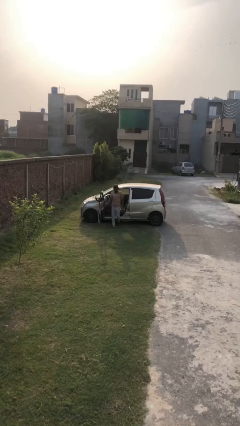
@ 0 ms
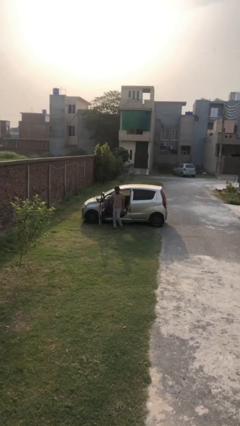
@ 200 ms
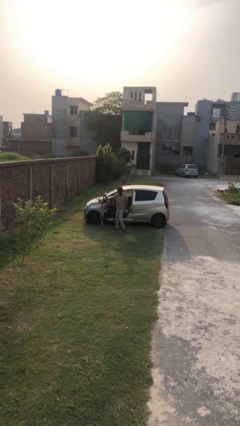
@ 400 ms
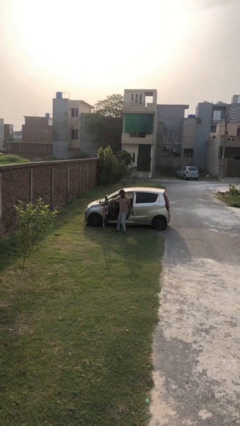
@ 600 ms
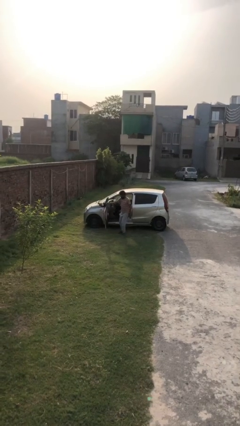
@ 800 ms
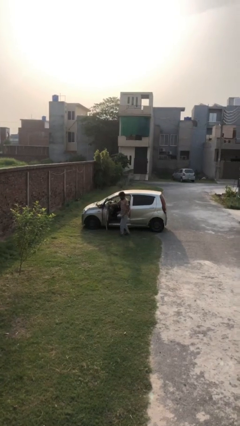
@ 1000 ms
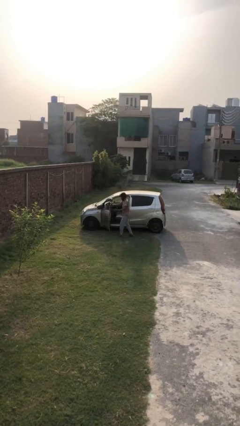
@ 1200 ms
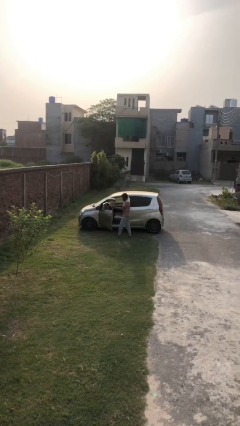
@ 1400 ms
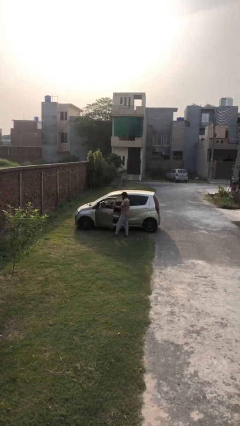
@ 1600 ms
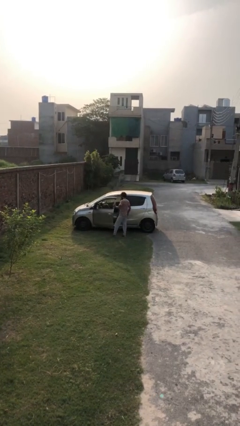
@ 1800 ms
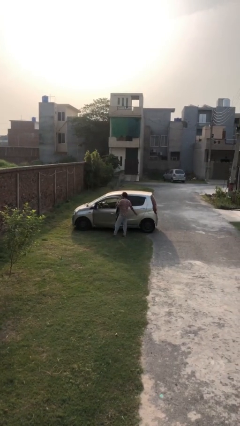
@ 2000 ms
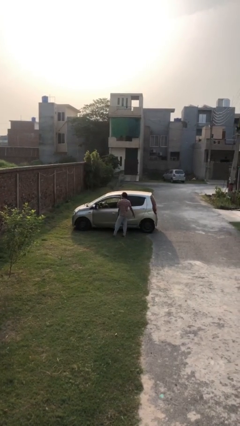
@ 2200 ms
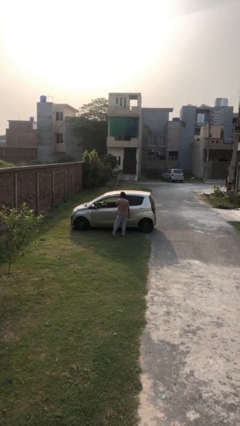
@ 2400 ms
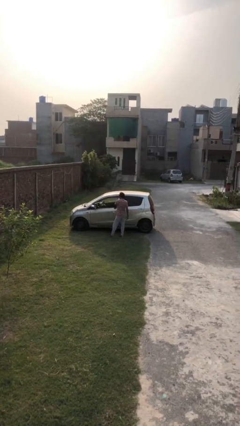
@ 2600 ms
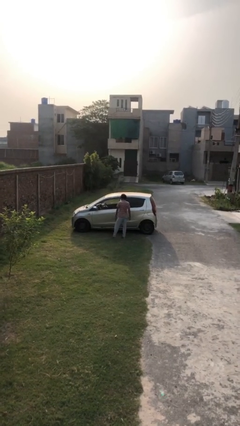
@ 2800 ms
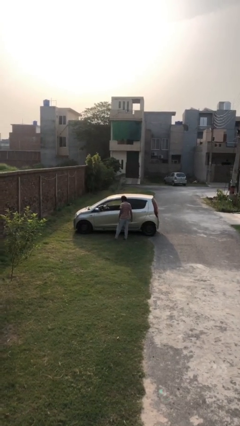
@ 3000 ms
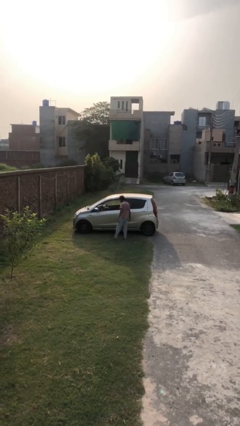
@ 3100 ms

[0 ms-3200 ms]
person closes car door

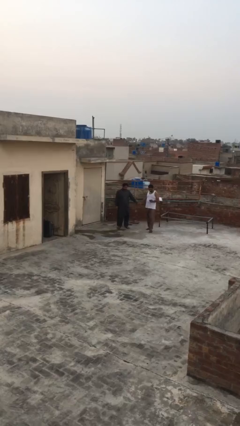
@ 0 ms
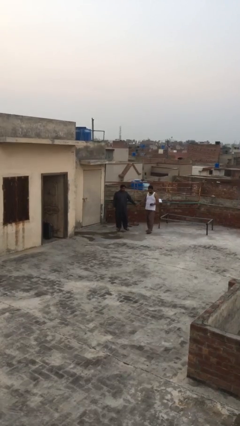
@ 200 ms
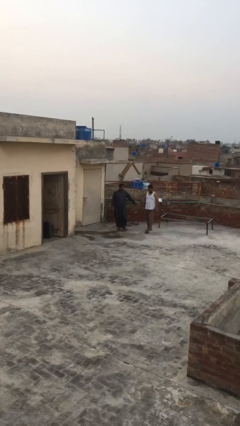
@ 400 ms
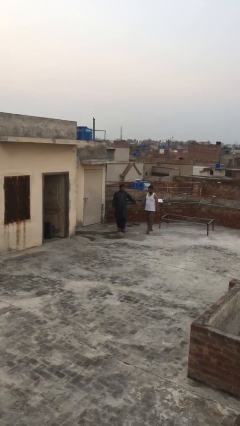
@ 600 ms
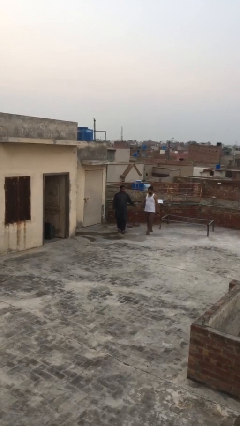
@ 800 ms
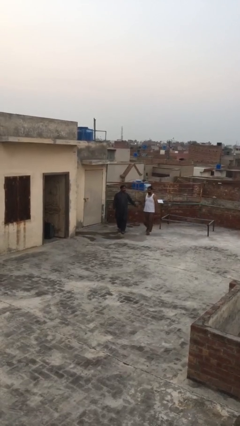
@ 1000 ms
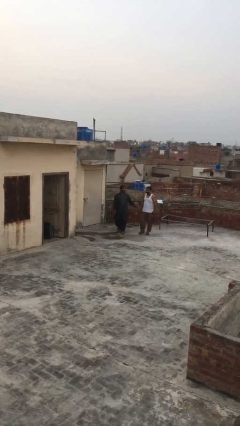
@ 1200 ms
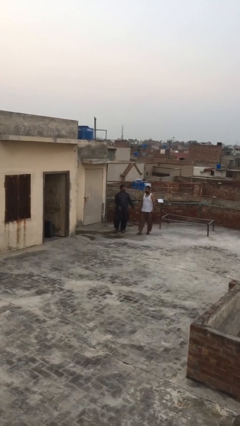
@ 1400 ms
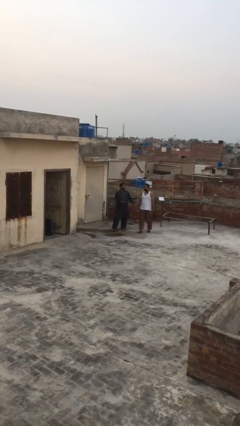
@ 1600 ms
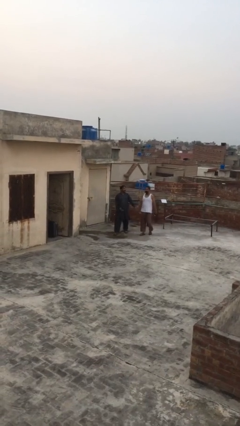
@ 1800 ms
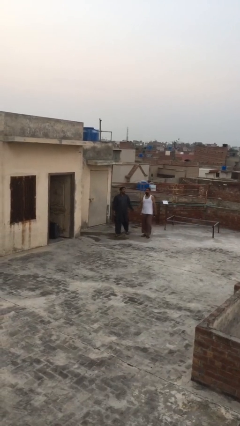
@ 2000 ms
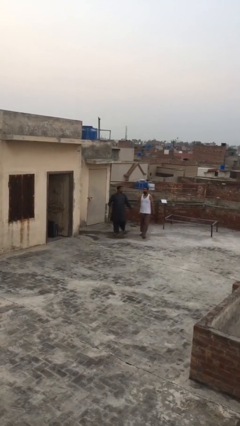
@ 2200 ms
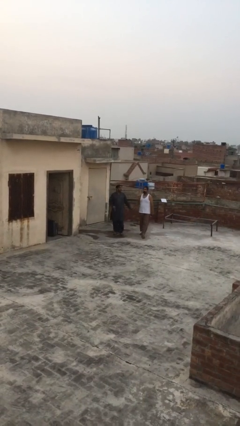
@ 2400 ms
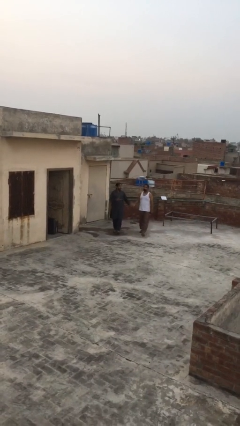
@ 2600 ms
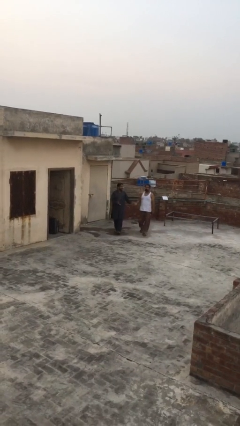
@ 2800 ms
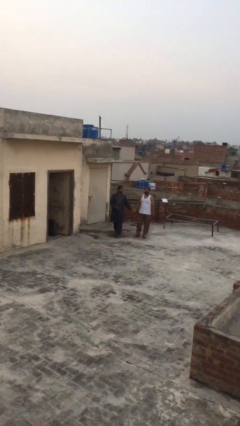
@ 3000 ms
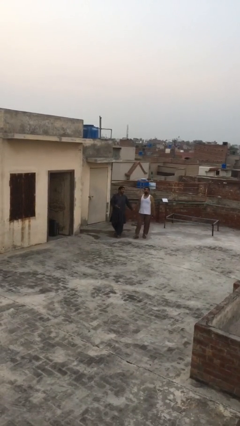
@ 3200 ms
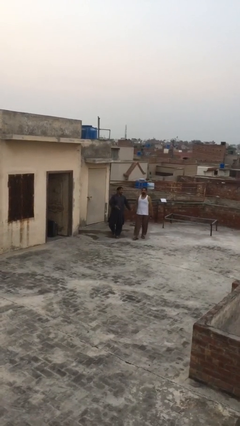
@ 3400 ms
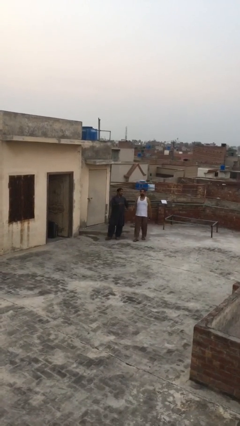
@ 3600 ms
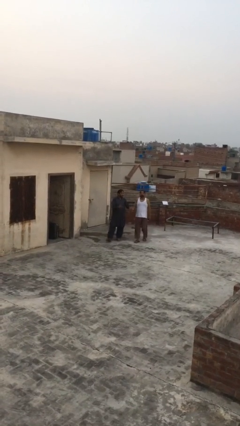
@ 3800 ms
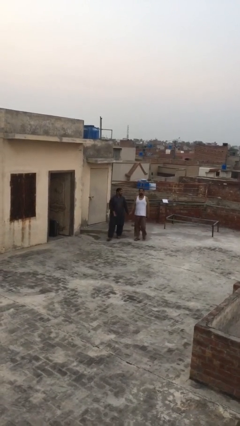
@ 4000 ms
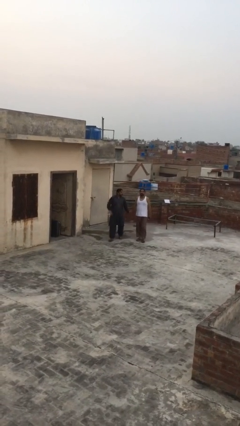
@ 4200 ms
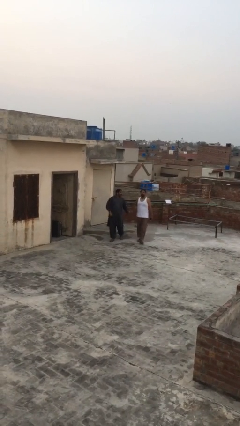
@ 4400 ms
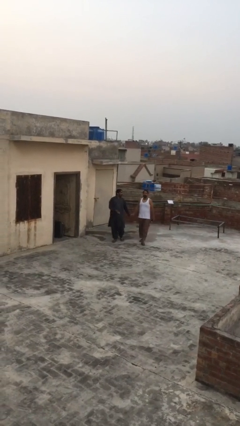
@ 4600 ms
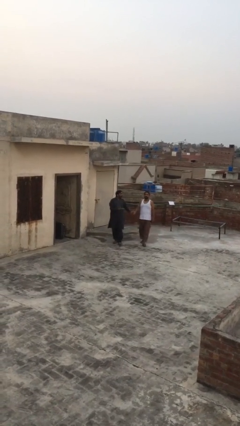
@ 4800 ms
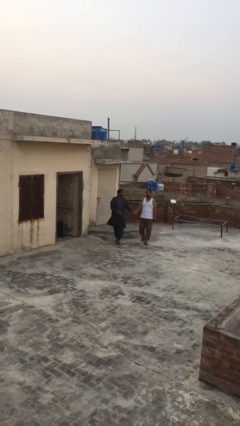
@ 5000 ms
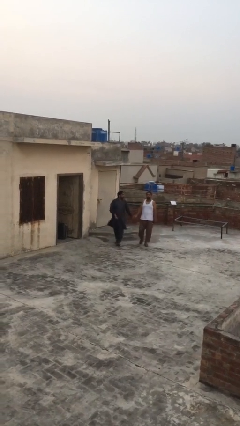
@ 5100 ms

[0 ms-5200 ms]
person holds hand

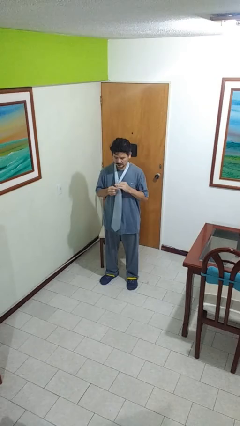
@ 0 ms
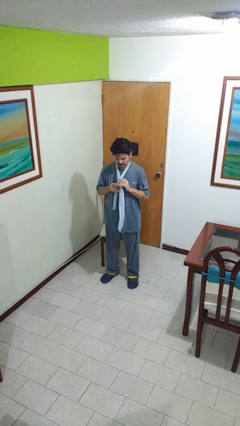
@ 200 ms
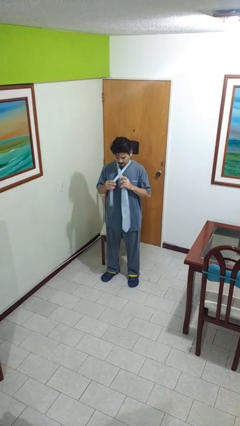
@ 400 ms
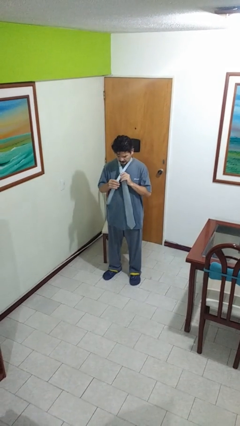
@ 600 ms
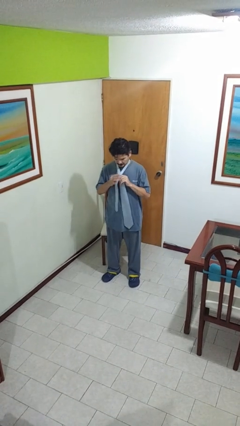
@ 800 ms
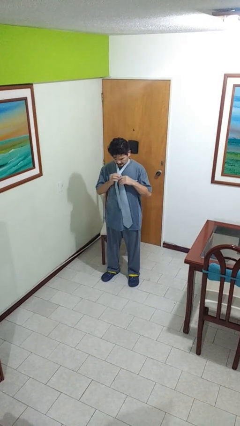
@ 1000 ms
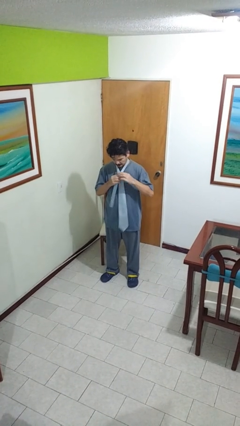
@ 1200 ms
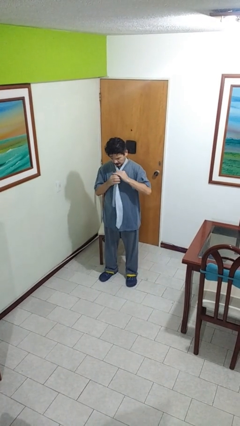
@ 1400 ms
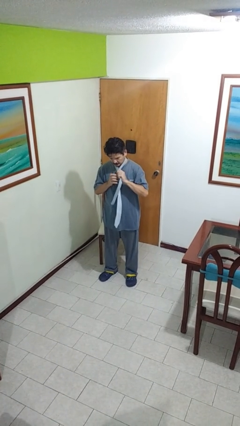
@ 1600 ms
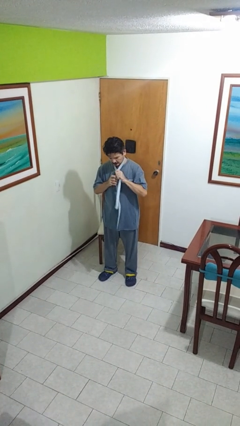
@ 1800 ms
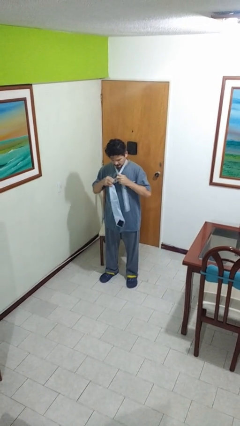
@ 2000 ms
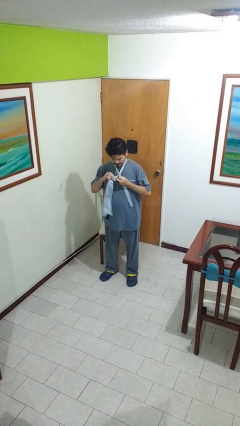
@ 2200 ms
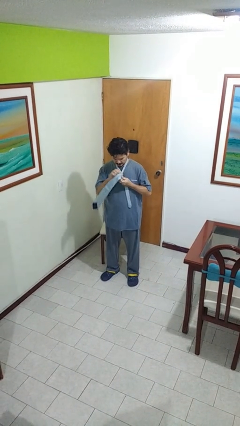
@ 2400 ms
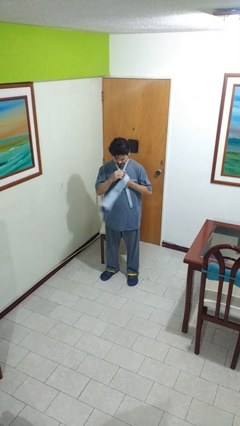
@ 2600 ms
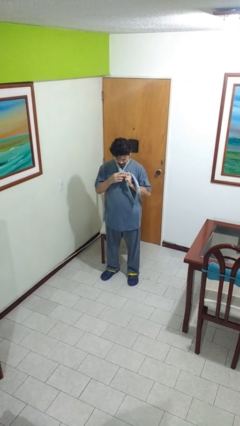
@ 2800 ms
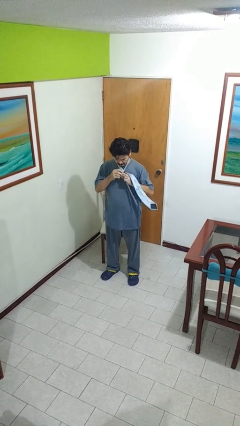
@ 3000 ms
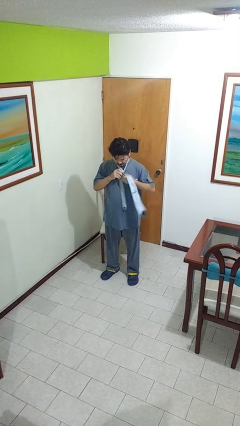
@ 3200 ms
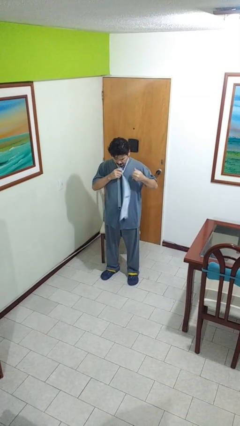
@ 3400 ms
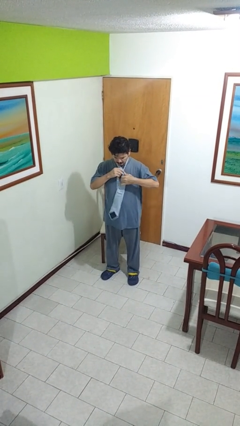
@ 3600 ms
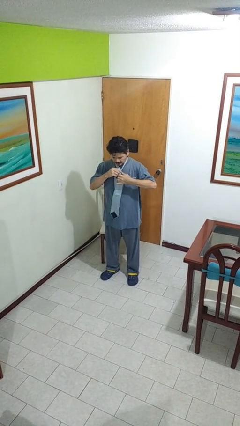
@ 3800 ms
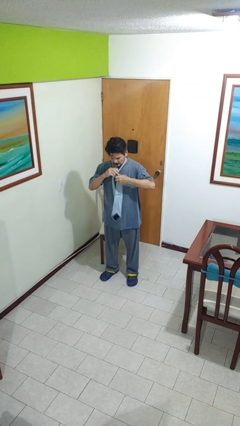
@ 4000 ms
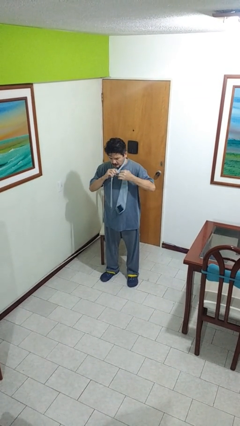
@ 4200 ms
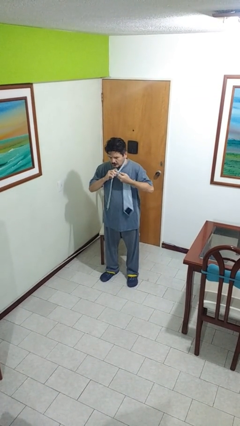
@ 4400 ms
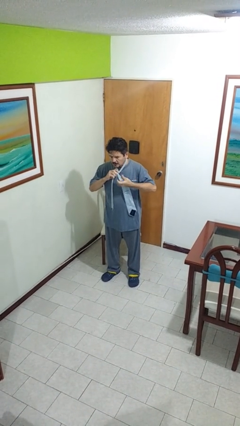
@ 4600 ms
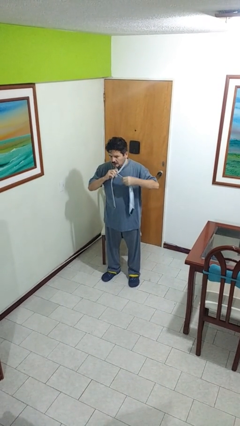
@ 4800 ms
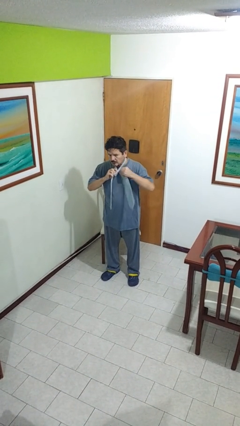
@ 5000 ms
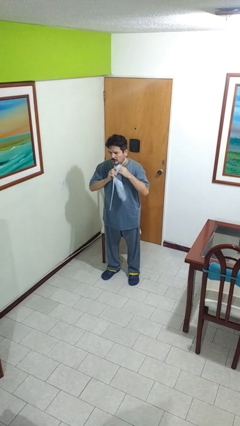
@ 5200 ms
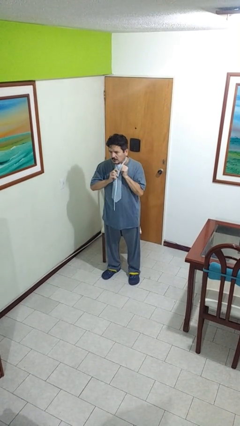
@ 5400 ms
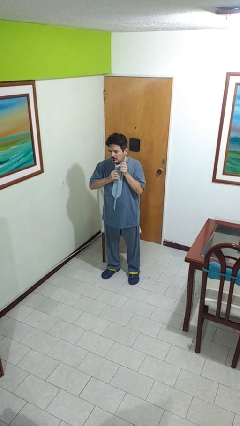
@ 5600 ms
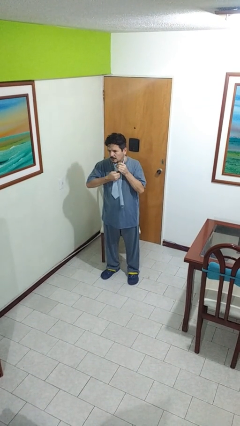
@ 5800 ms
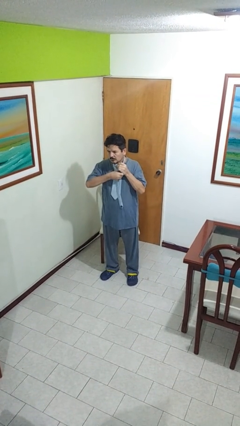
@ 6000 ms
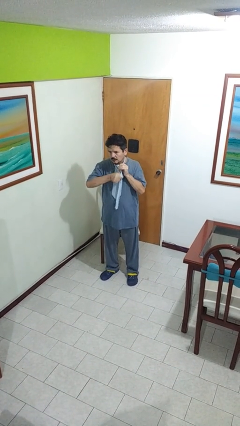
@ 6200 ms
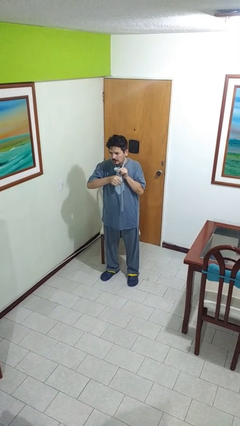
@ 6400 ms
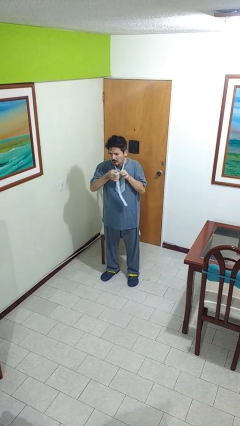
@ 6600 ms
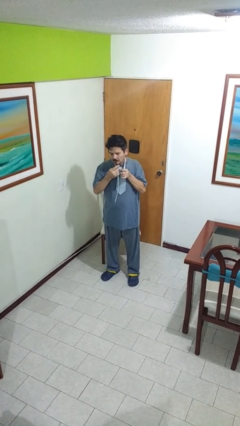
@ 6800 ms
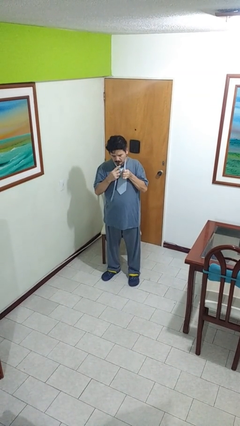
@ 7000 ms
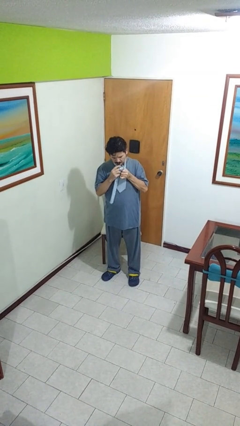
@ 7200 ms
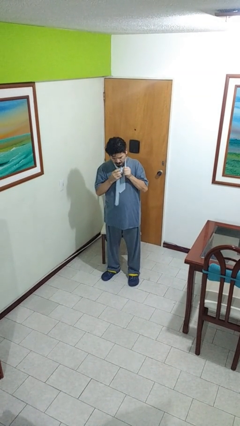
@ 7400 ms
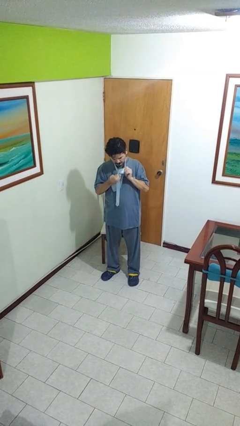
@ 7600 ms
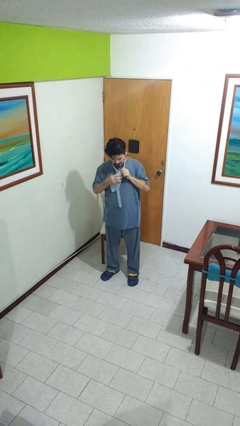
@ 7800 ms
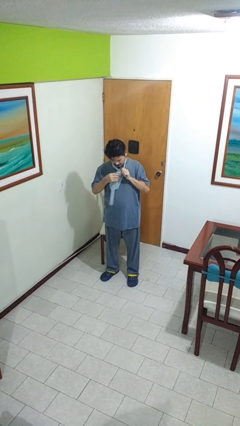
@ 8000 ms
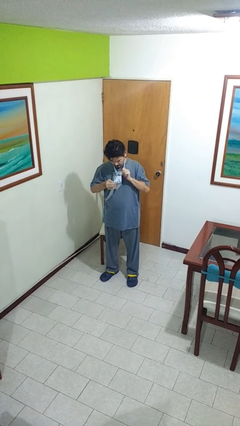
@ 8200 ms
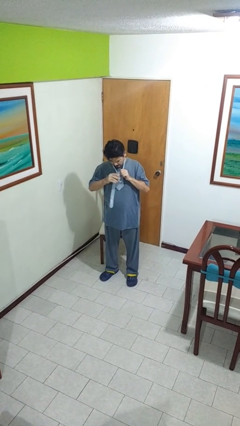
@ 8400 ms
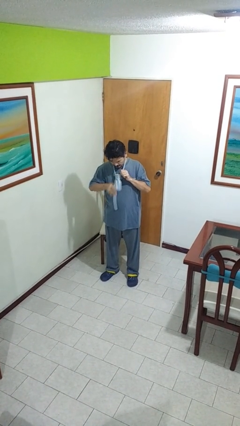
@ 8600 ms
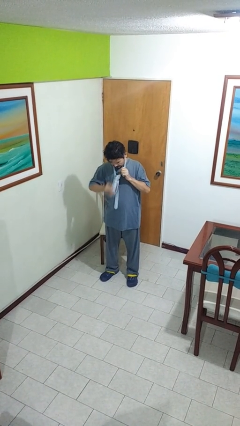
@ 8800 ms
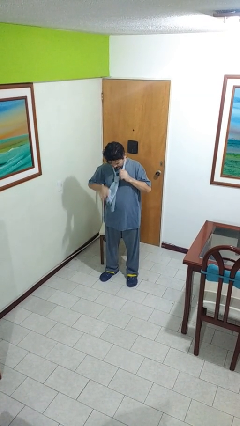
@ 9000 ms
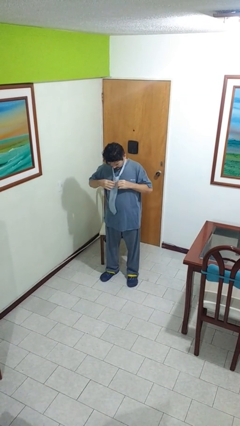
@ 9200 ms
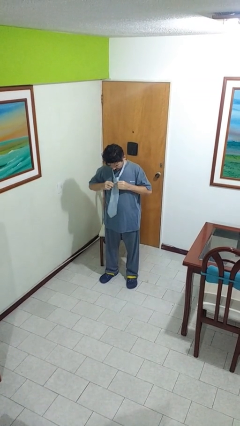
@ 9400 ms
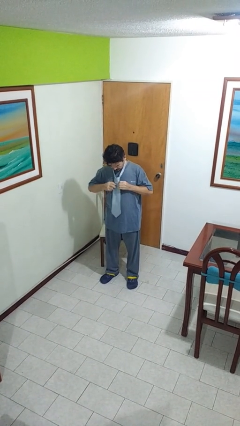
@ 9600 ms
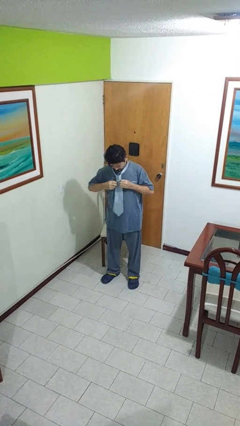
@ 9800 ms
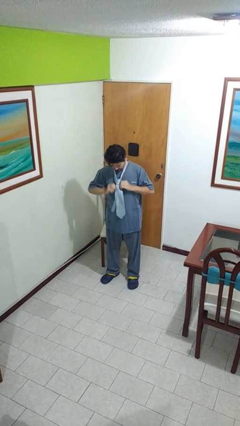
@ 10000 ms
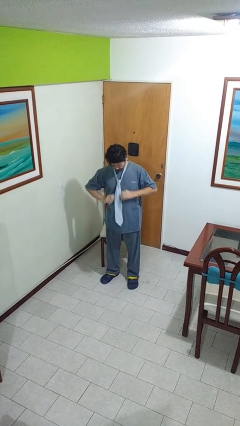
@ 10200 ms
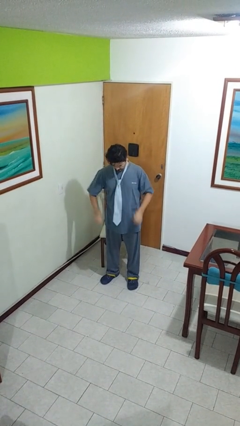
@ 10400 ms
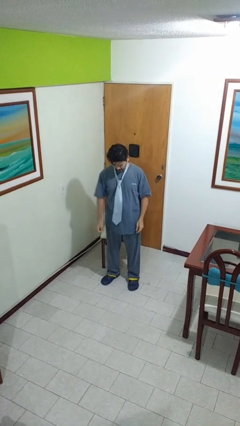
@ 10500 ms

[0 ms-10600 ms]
person puts on necktie
